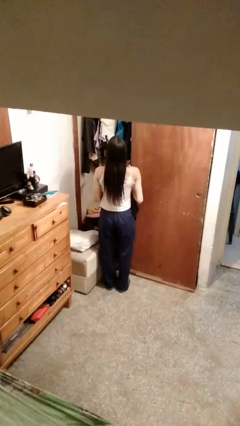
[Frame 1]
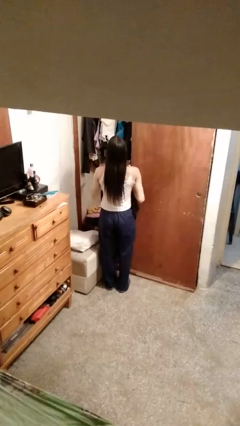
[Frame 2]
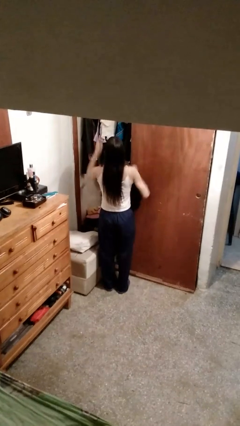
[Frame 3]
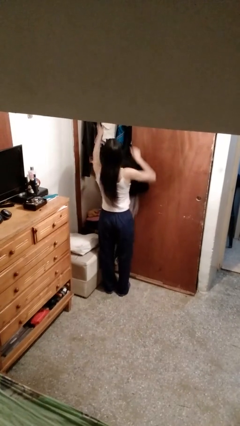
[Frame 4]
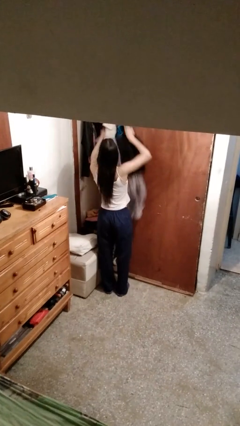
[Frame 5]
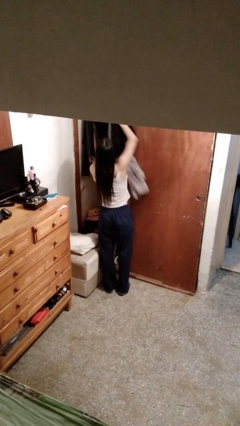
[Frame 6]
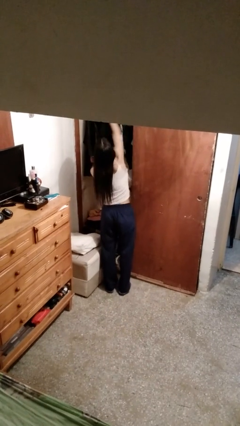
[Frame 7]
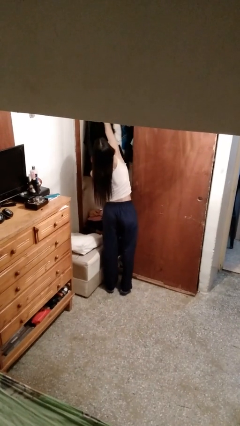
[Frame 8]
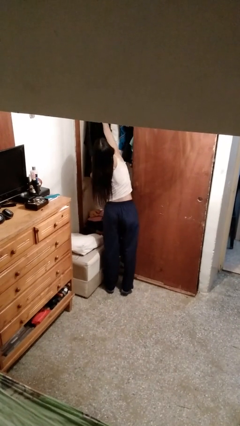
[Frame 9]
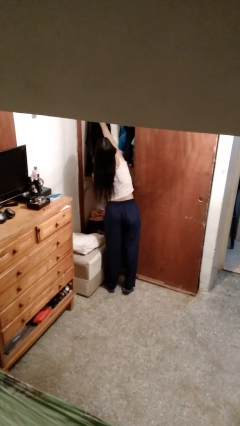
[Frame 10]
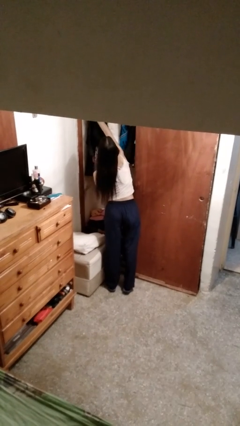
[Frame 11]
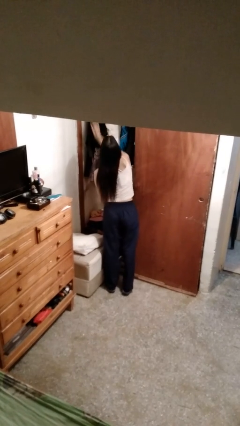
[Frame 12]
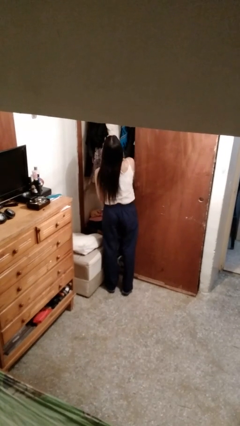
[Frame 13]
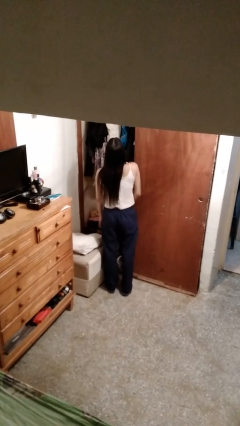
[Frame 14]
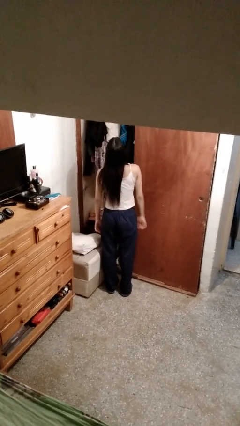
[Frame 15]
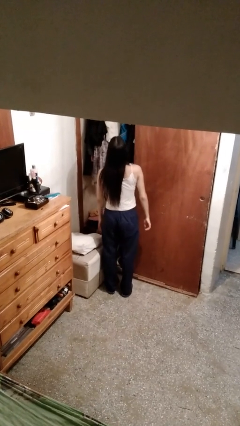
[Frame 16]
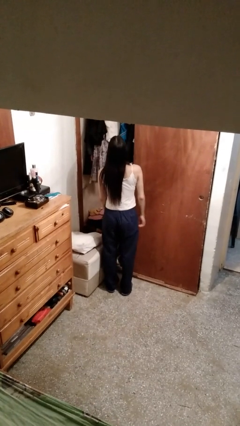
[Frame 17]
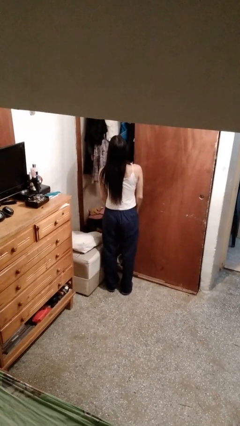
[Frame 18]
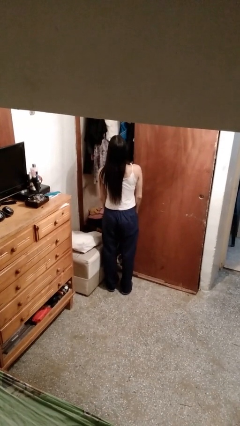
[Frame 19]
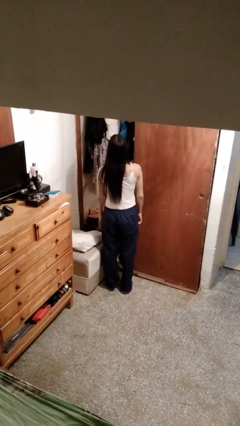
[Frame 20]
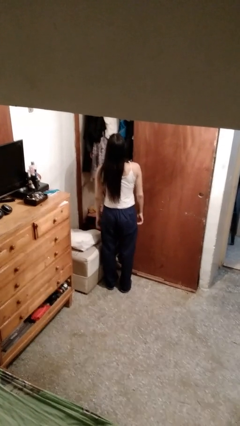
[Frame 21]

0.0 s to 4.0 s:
person puts clothes into closet

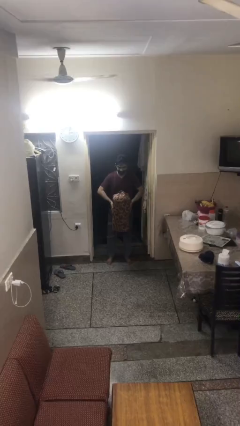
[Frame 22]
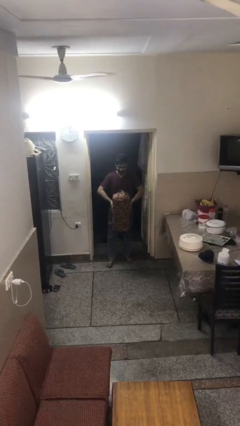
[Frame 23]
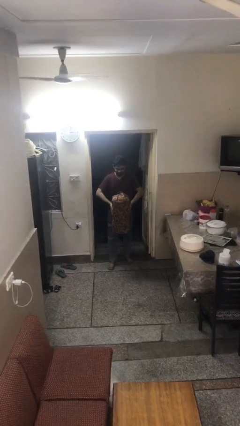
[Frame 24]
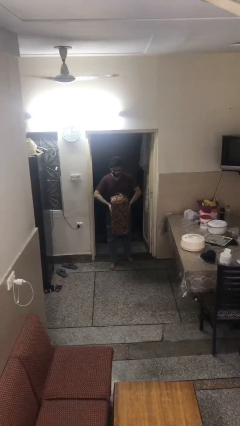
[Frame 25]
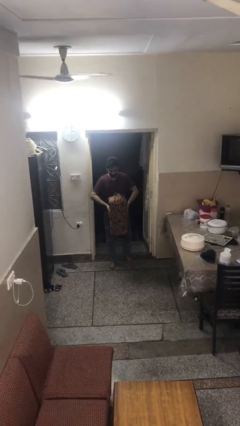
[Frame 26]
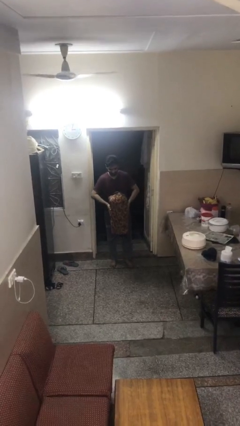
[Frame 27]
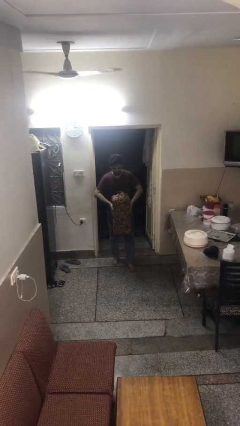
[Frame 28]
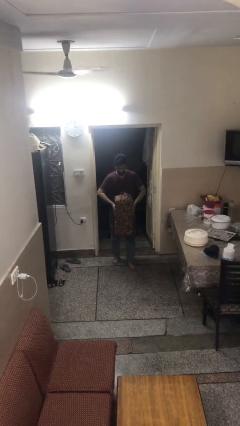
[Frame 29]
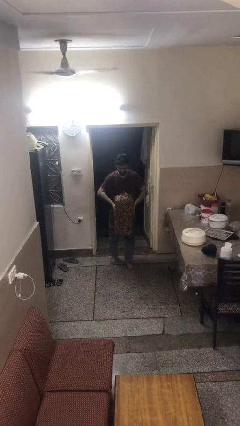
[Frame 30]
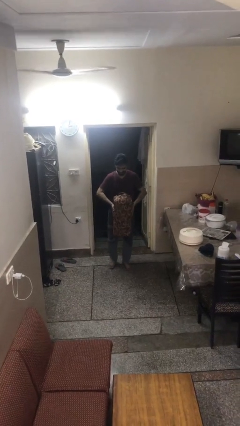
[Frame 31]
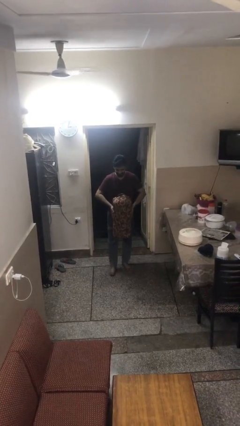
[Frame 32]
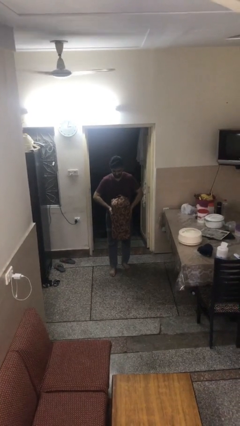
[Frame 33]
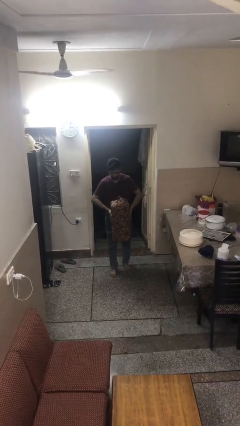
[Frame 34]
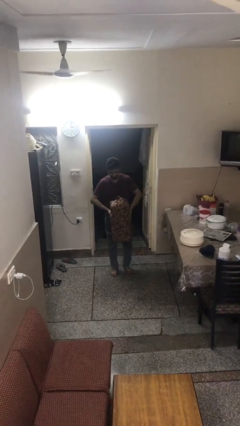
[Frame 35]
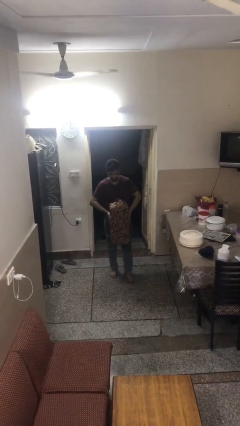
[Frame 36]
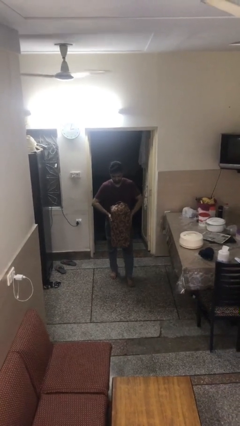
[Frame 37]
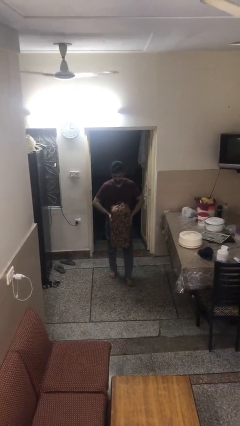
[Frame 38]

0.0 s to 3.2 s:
person carries heavy object

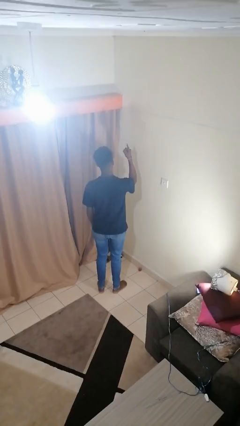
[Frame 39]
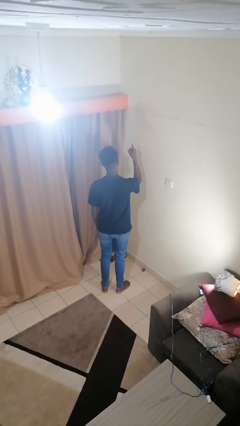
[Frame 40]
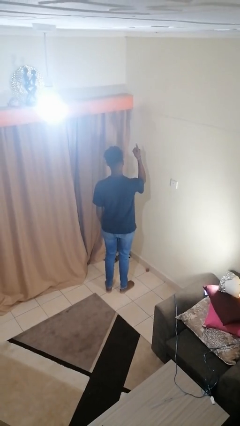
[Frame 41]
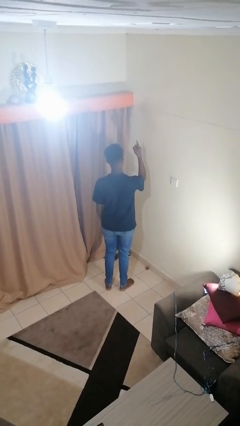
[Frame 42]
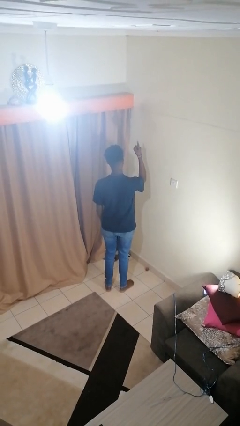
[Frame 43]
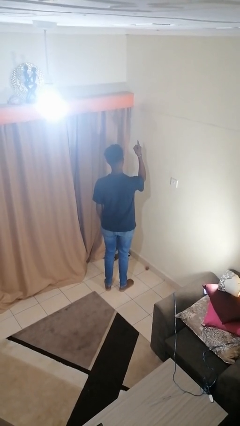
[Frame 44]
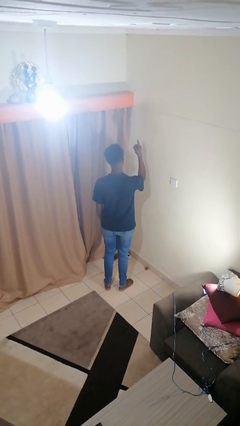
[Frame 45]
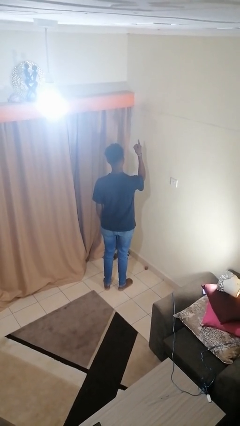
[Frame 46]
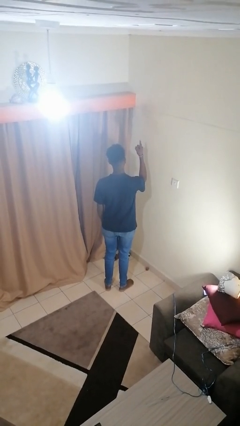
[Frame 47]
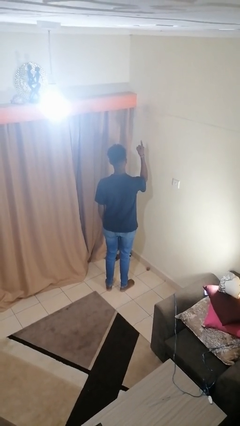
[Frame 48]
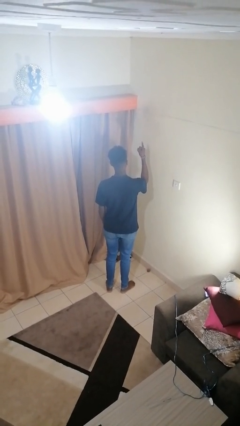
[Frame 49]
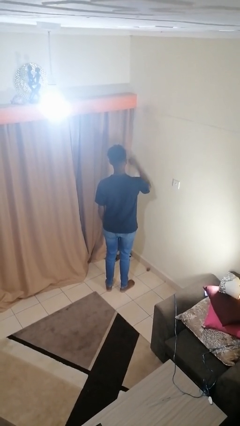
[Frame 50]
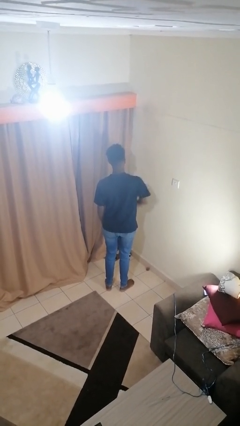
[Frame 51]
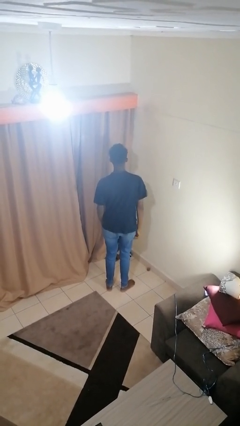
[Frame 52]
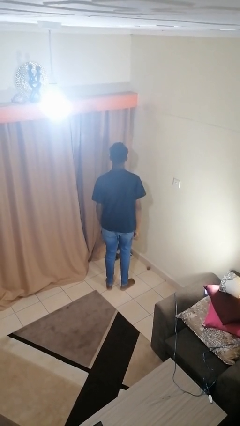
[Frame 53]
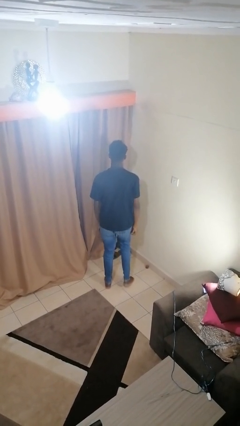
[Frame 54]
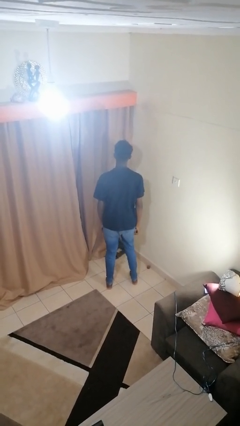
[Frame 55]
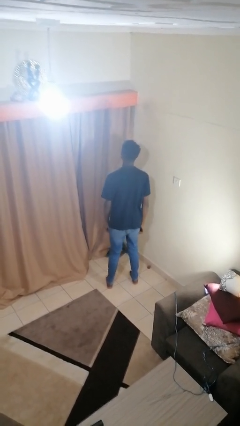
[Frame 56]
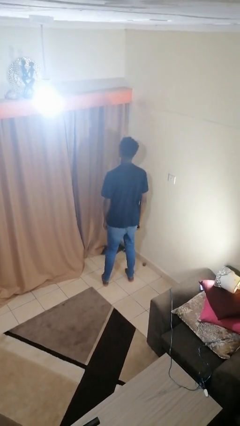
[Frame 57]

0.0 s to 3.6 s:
person gestures number one

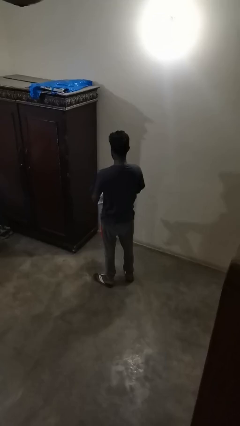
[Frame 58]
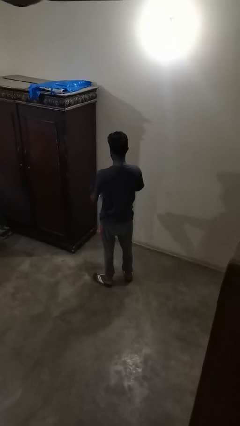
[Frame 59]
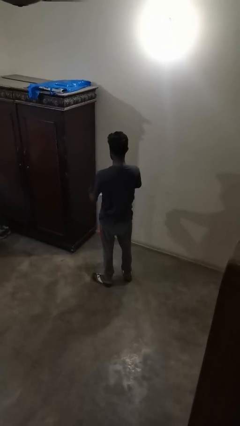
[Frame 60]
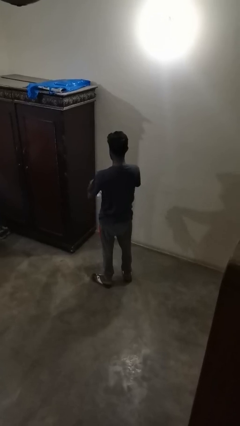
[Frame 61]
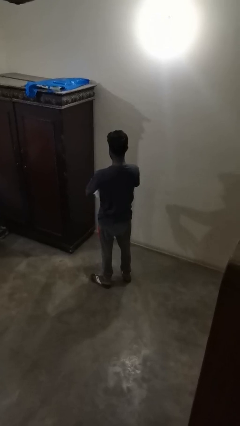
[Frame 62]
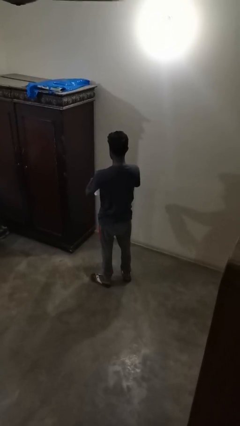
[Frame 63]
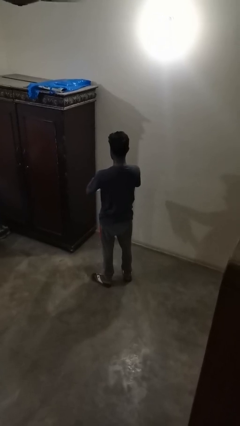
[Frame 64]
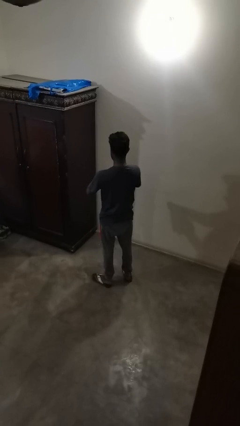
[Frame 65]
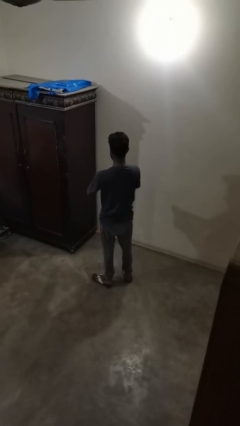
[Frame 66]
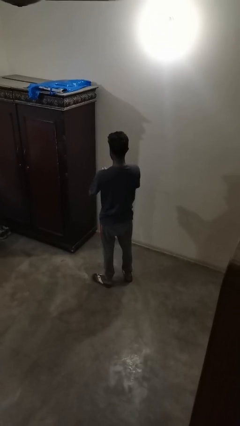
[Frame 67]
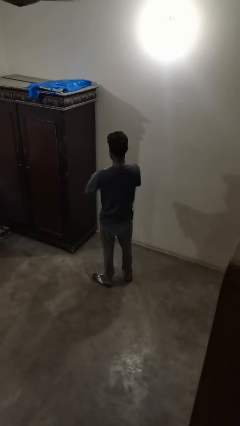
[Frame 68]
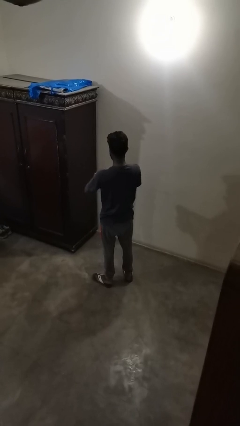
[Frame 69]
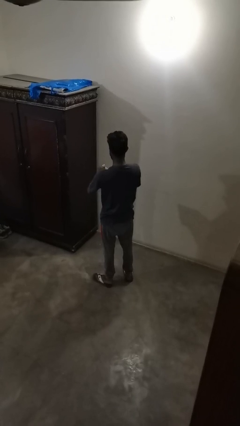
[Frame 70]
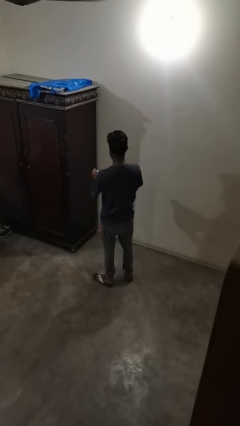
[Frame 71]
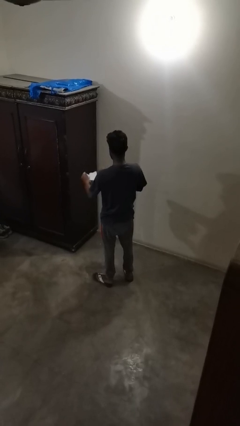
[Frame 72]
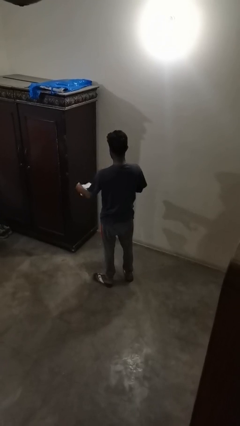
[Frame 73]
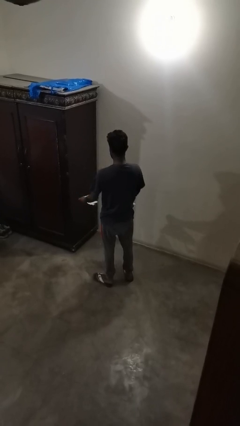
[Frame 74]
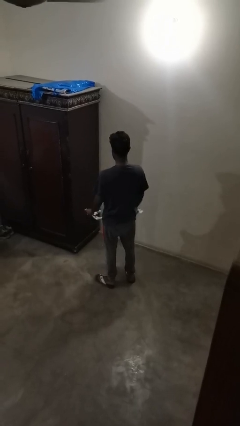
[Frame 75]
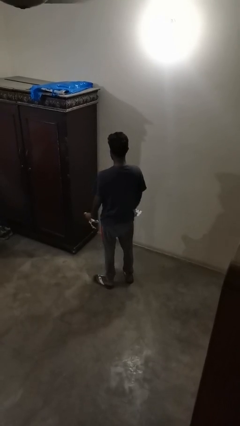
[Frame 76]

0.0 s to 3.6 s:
person tears paper

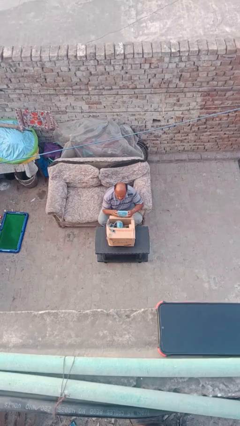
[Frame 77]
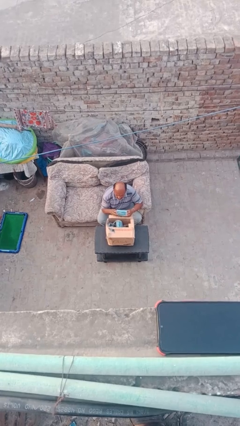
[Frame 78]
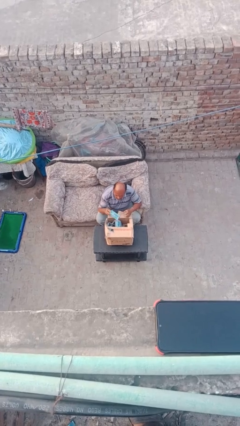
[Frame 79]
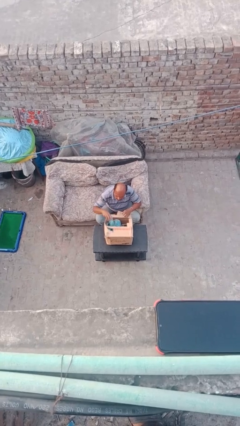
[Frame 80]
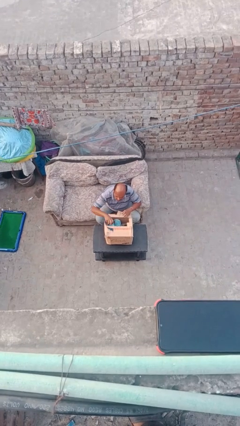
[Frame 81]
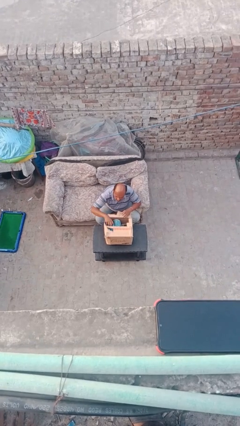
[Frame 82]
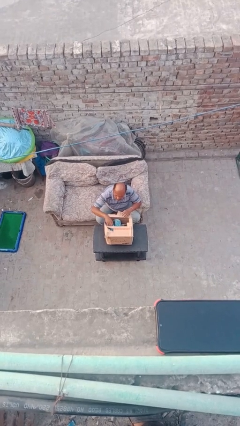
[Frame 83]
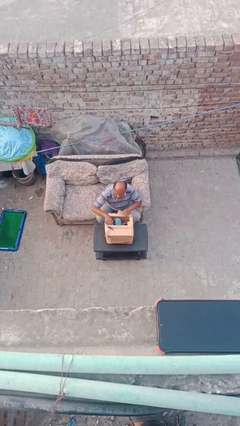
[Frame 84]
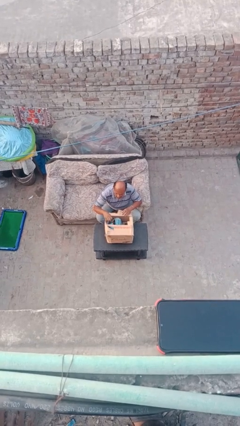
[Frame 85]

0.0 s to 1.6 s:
person puts object into box

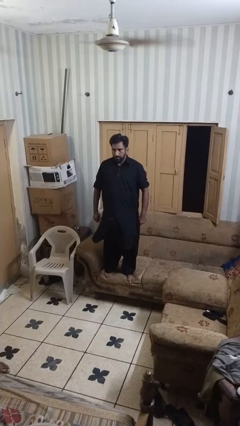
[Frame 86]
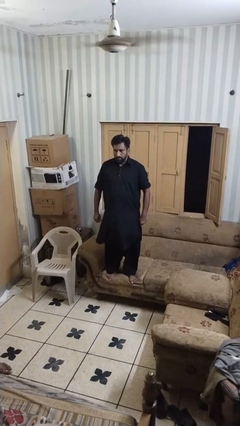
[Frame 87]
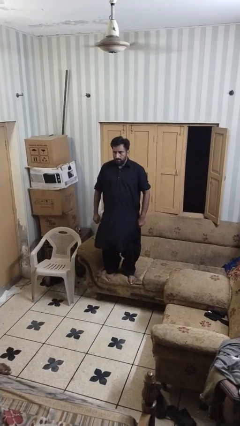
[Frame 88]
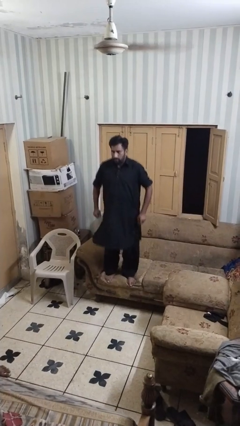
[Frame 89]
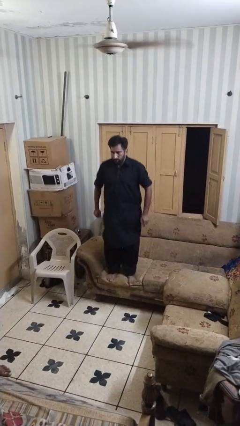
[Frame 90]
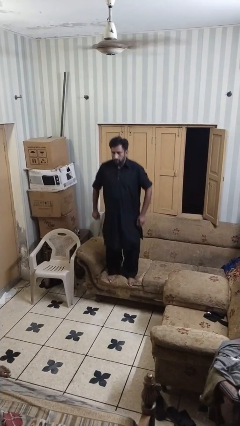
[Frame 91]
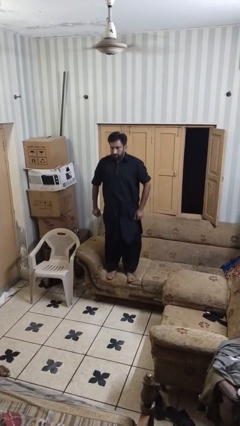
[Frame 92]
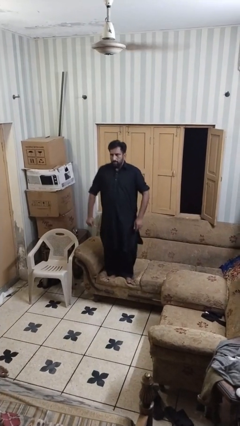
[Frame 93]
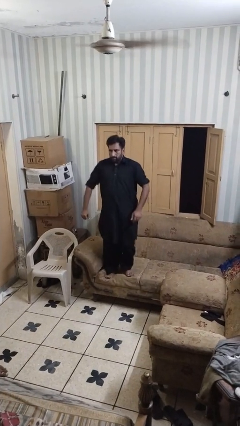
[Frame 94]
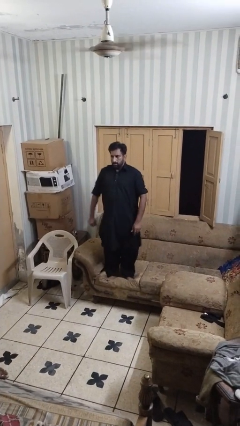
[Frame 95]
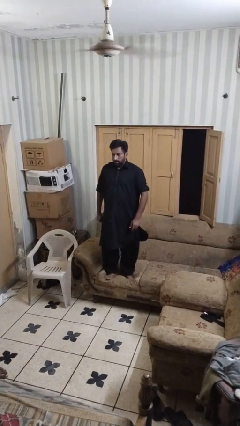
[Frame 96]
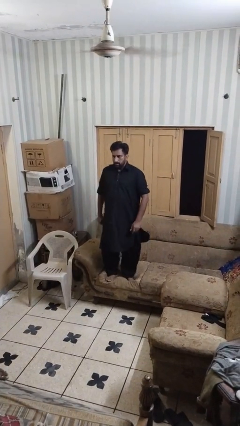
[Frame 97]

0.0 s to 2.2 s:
person jumps on couch
